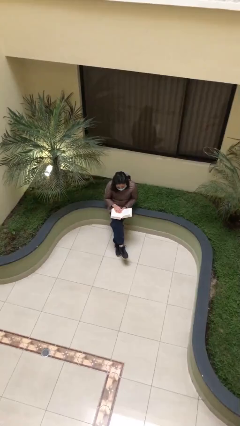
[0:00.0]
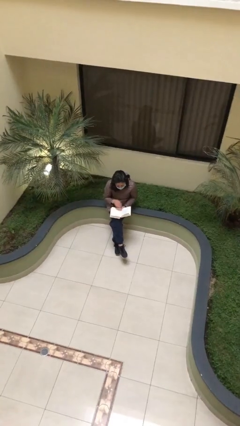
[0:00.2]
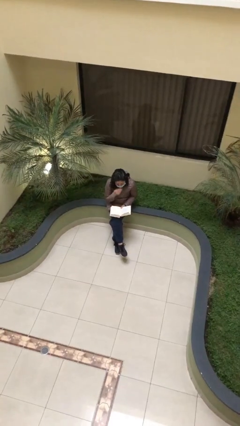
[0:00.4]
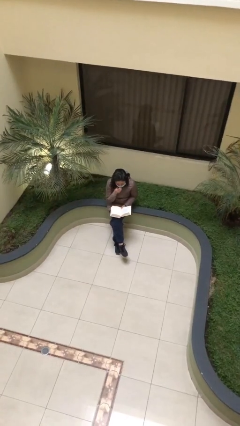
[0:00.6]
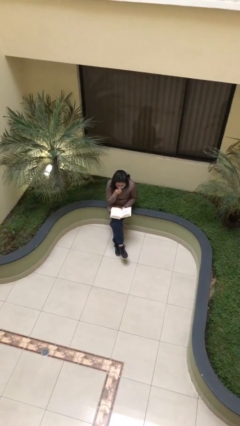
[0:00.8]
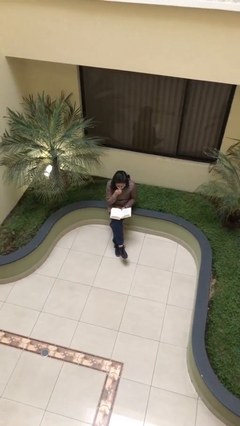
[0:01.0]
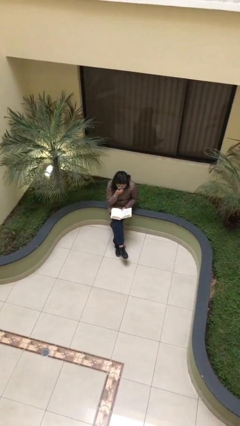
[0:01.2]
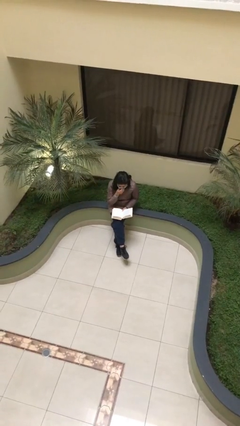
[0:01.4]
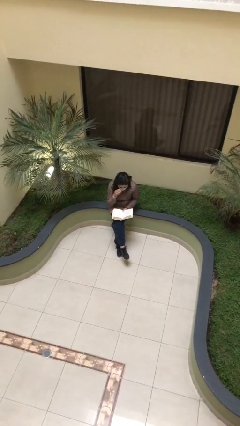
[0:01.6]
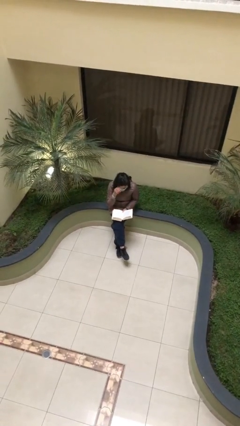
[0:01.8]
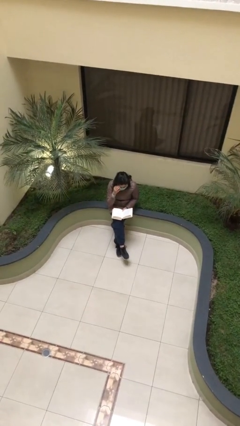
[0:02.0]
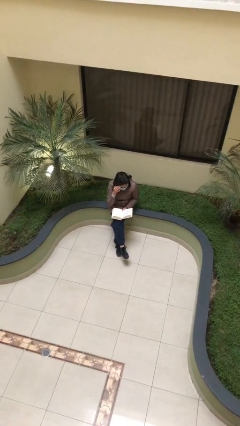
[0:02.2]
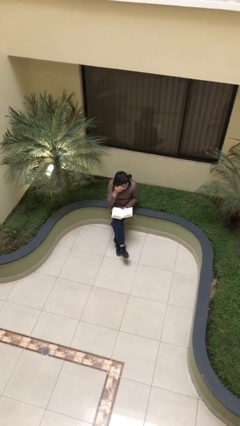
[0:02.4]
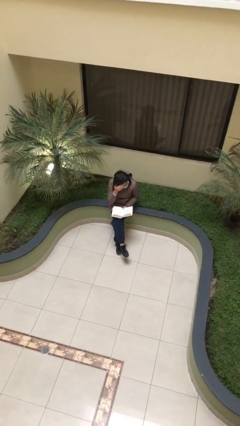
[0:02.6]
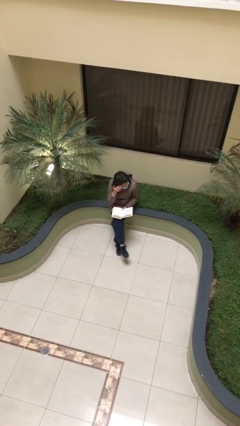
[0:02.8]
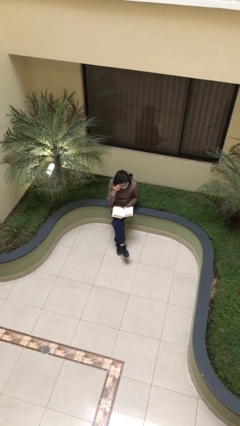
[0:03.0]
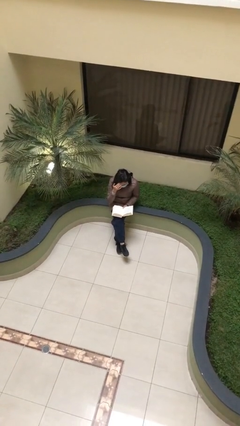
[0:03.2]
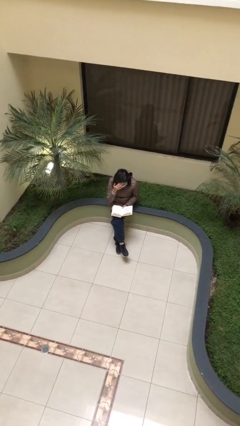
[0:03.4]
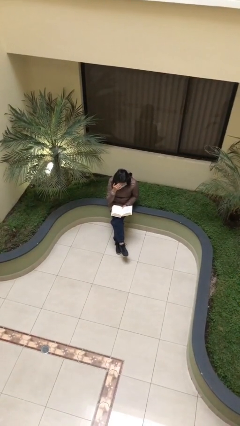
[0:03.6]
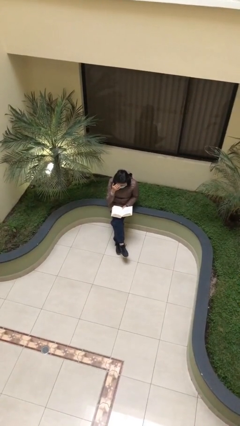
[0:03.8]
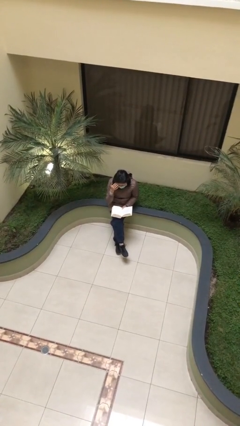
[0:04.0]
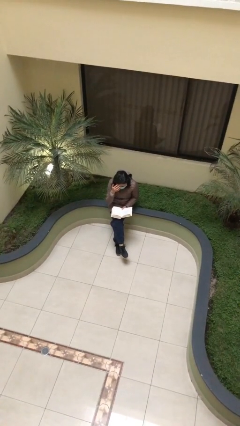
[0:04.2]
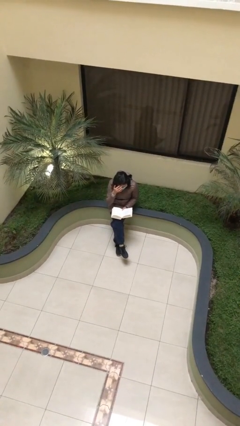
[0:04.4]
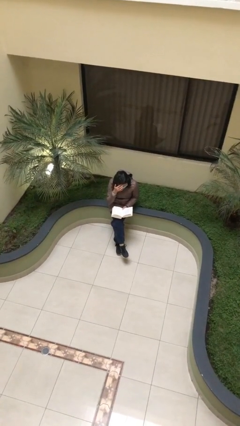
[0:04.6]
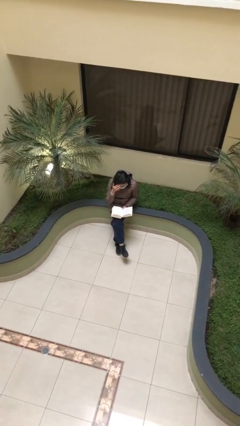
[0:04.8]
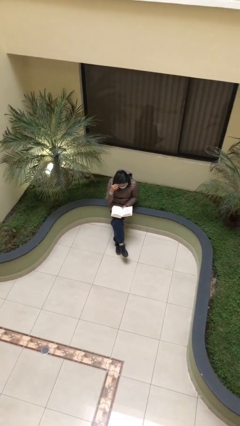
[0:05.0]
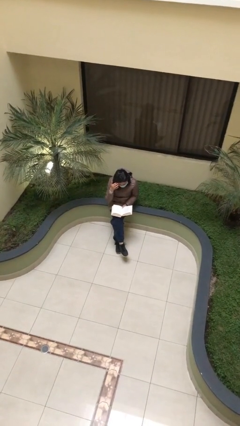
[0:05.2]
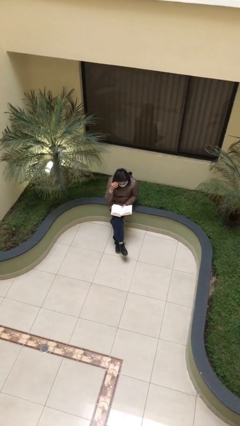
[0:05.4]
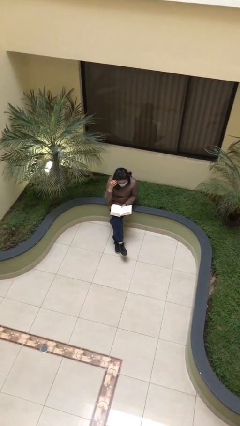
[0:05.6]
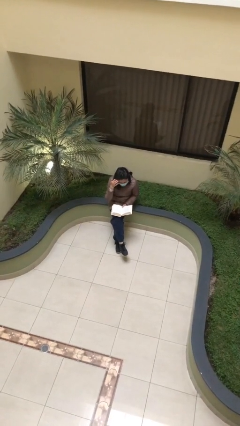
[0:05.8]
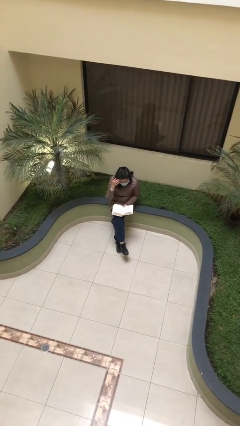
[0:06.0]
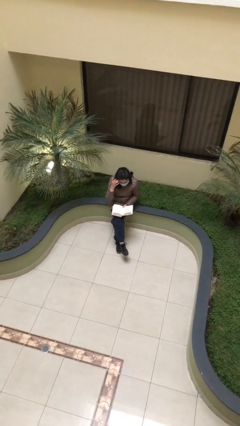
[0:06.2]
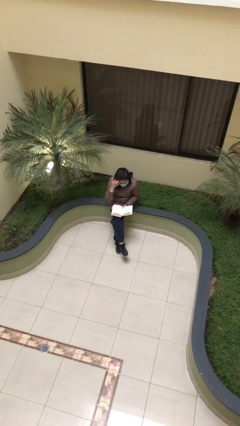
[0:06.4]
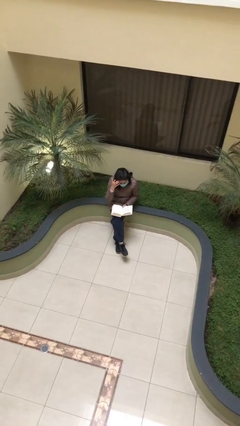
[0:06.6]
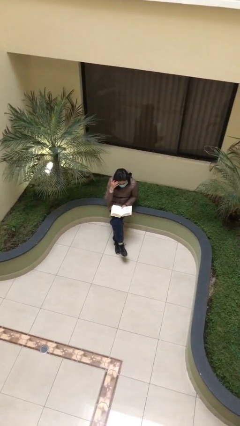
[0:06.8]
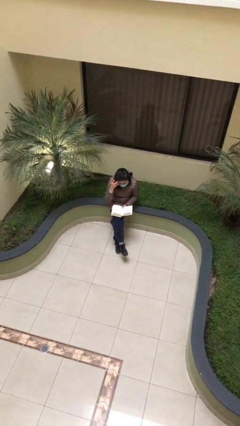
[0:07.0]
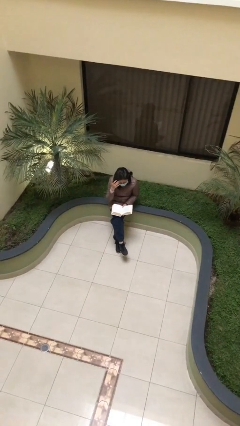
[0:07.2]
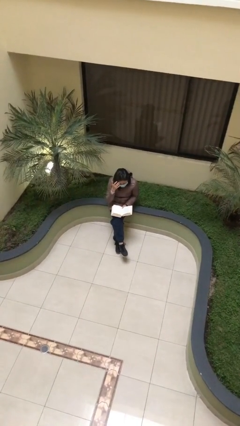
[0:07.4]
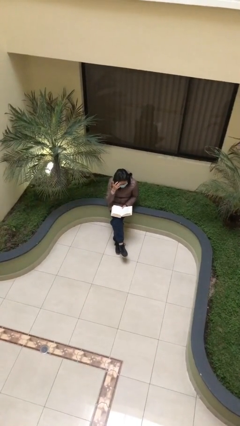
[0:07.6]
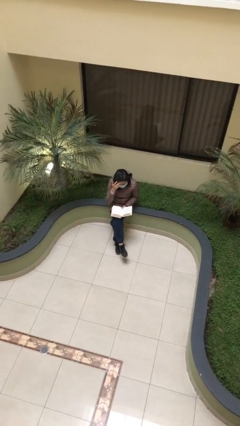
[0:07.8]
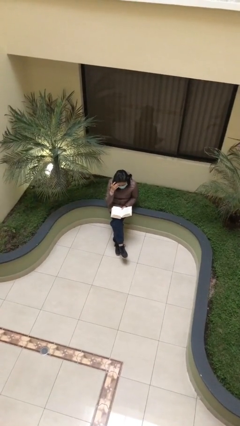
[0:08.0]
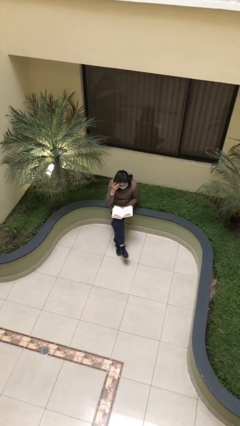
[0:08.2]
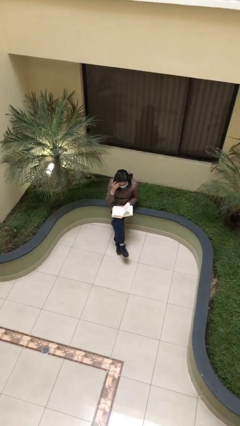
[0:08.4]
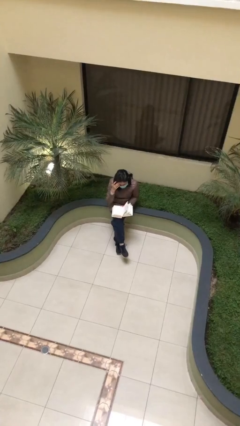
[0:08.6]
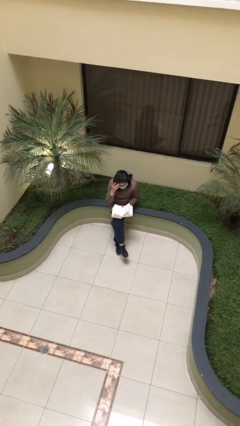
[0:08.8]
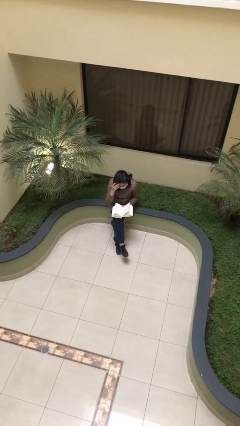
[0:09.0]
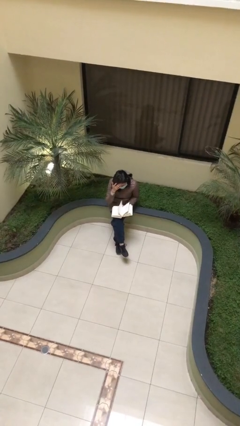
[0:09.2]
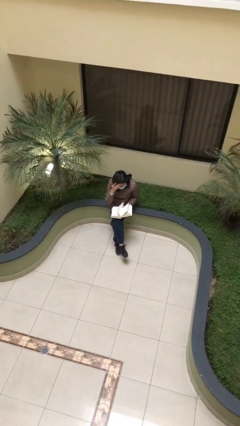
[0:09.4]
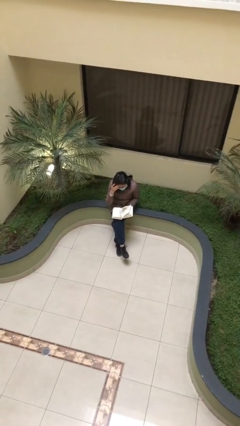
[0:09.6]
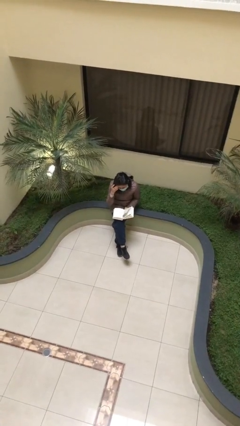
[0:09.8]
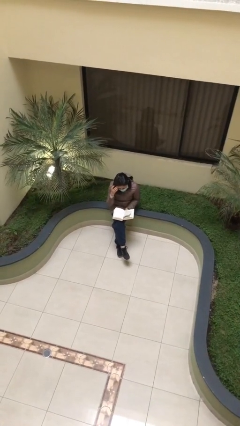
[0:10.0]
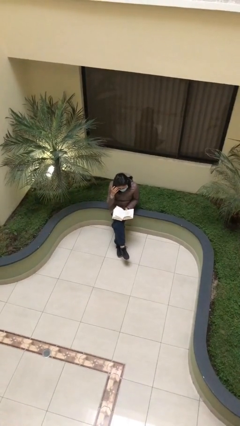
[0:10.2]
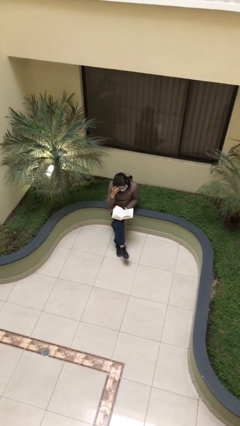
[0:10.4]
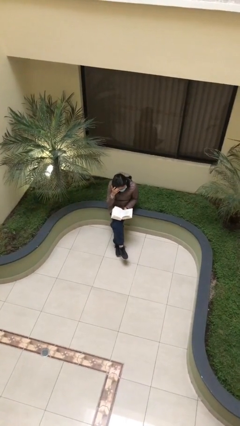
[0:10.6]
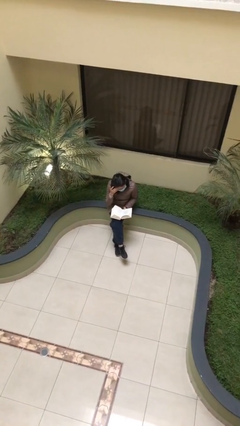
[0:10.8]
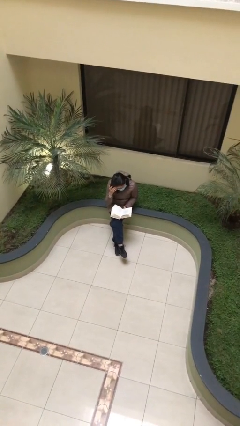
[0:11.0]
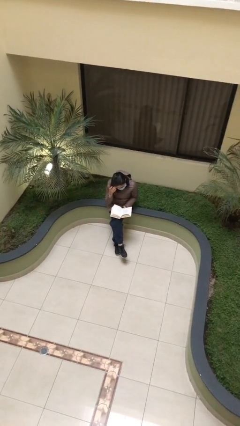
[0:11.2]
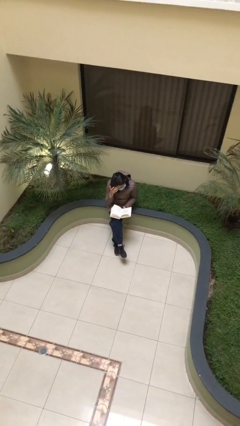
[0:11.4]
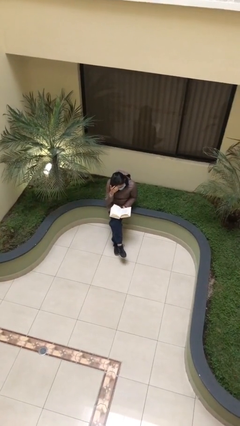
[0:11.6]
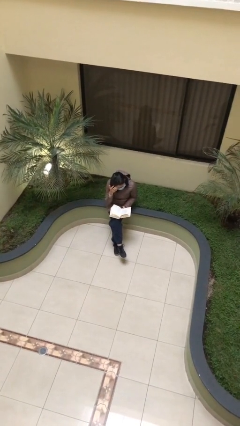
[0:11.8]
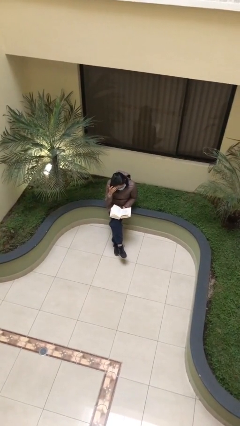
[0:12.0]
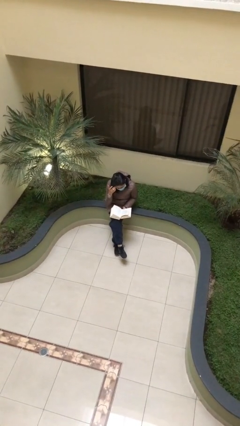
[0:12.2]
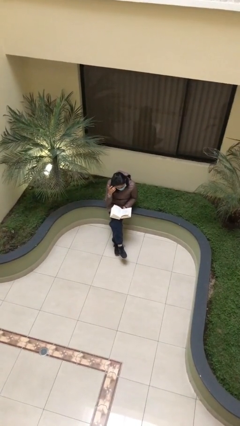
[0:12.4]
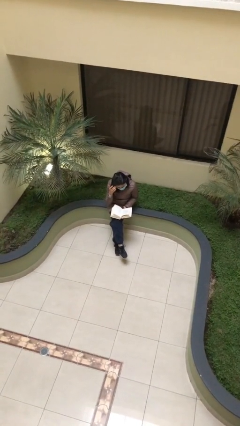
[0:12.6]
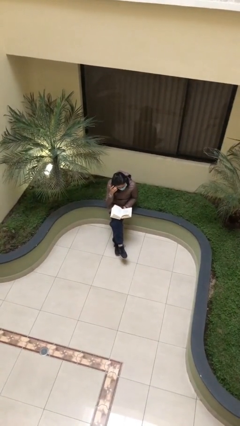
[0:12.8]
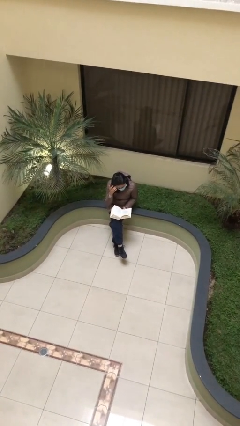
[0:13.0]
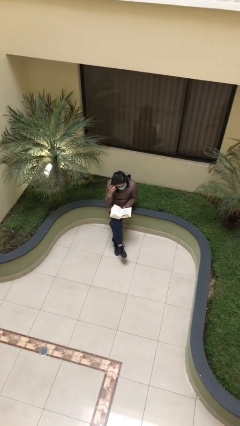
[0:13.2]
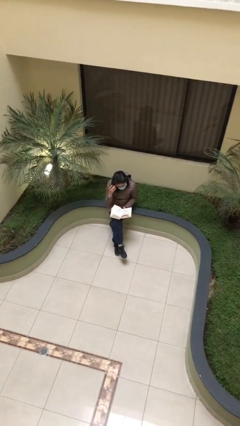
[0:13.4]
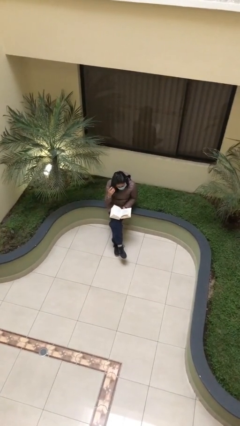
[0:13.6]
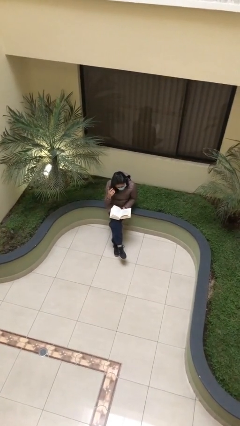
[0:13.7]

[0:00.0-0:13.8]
person reads document

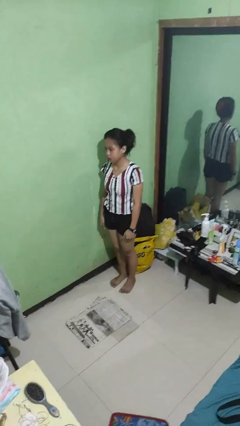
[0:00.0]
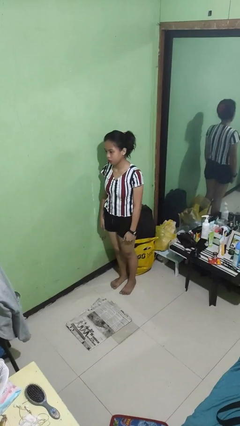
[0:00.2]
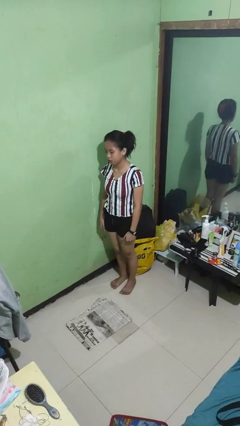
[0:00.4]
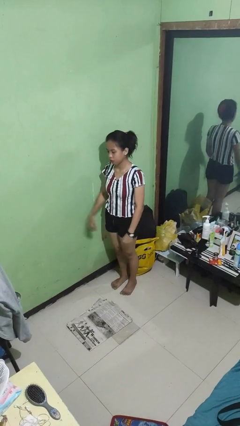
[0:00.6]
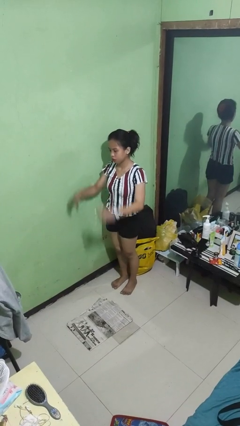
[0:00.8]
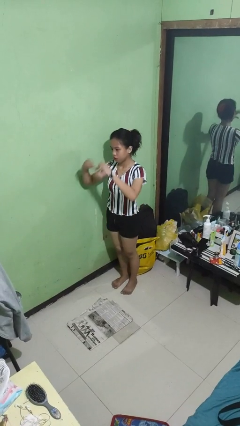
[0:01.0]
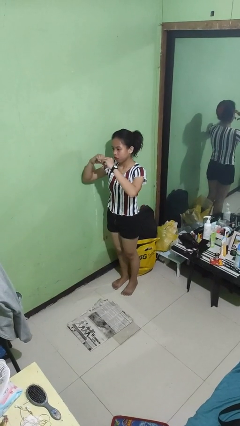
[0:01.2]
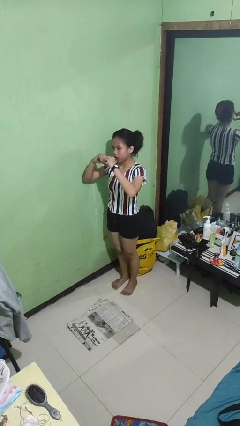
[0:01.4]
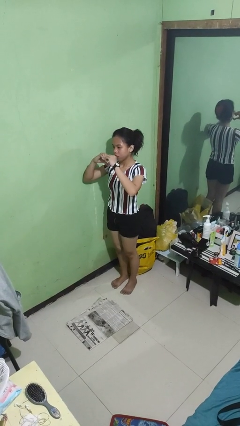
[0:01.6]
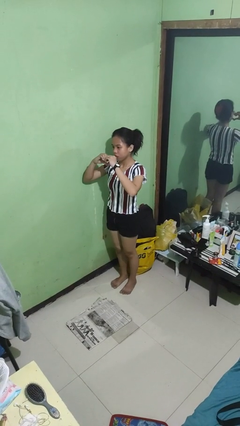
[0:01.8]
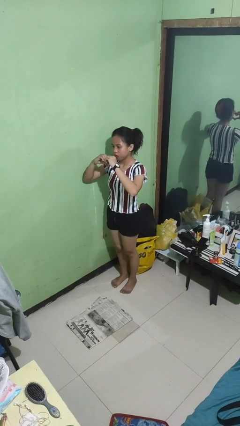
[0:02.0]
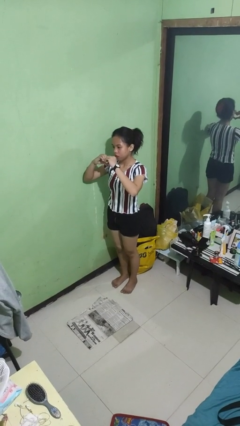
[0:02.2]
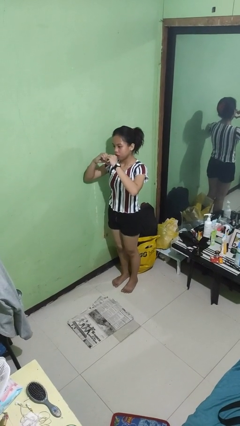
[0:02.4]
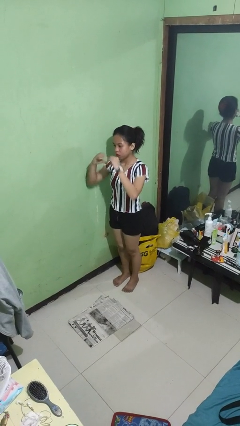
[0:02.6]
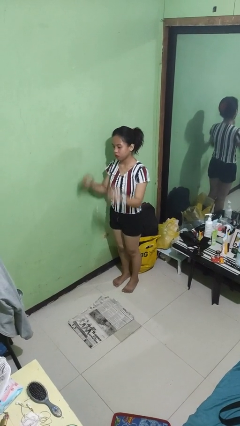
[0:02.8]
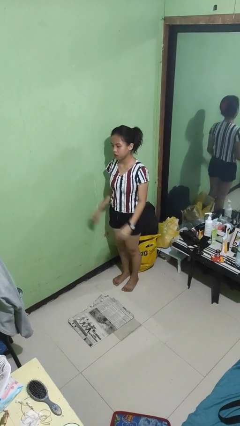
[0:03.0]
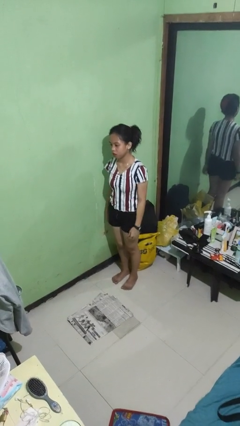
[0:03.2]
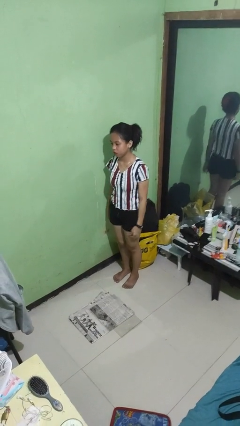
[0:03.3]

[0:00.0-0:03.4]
person gestures heart

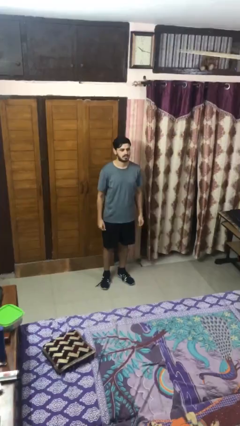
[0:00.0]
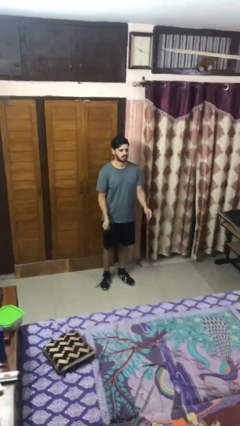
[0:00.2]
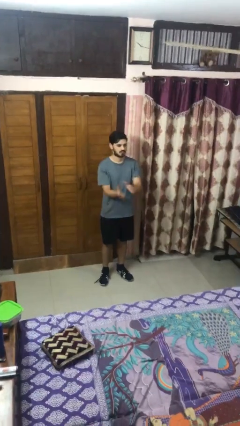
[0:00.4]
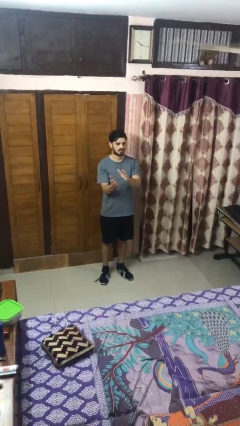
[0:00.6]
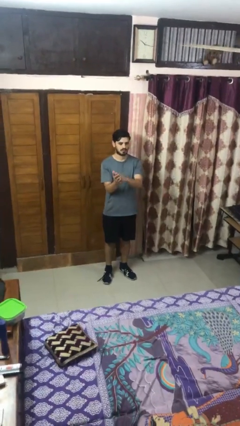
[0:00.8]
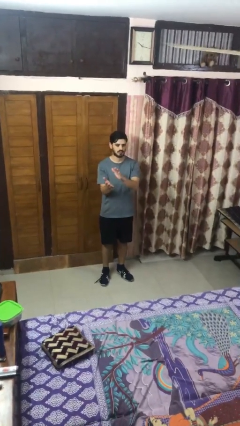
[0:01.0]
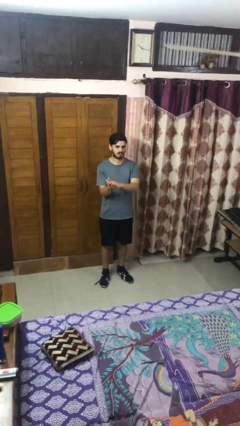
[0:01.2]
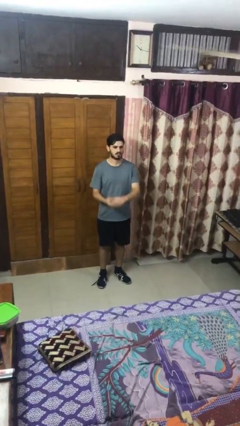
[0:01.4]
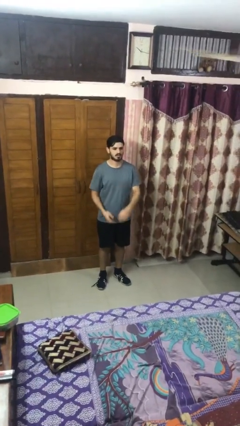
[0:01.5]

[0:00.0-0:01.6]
person claps hands
